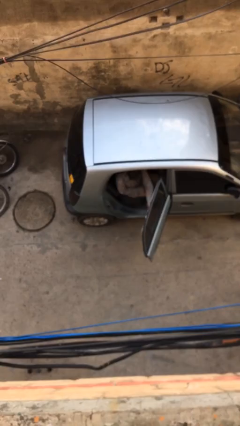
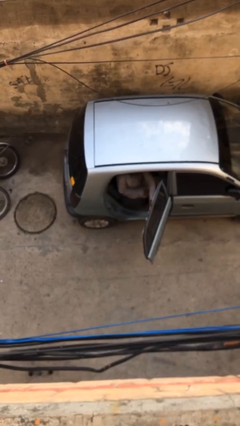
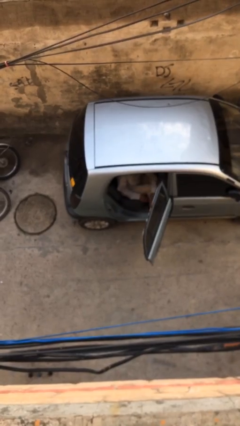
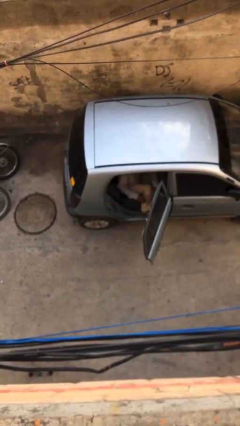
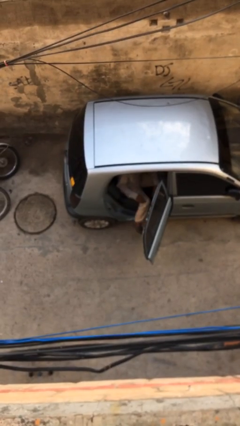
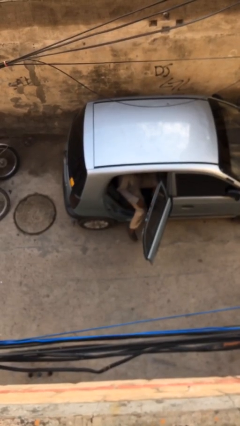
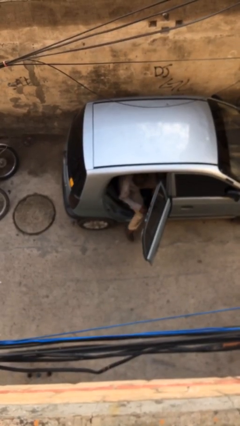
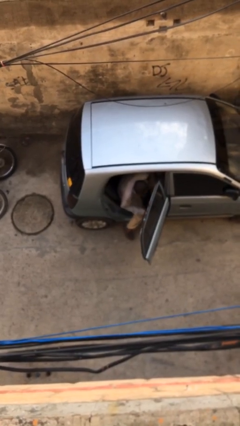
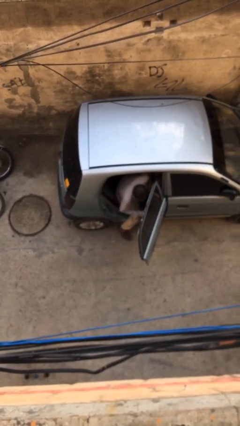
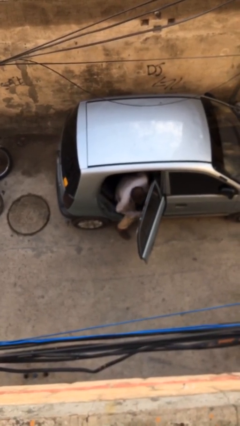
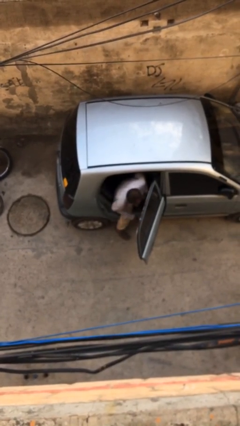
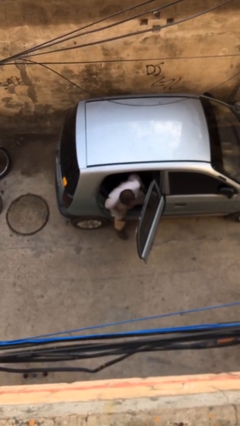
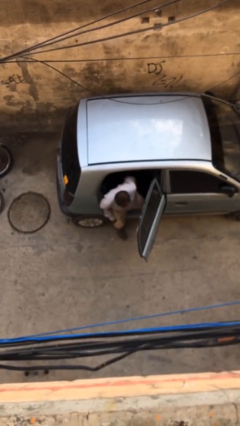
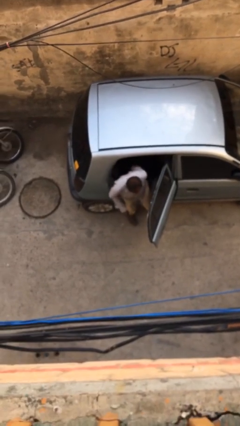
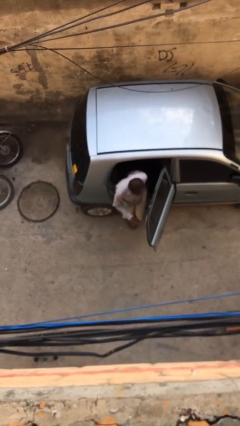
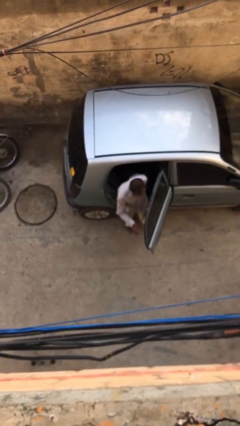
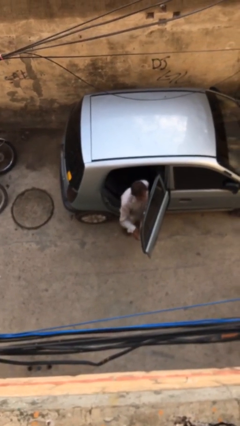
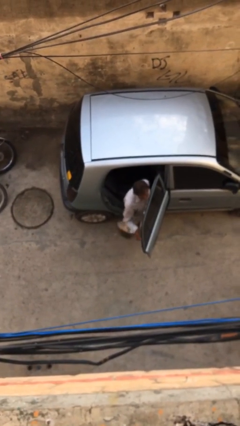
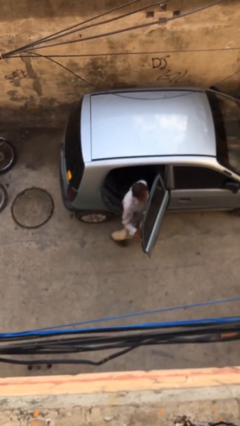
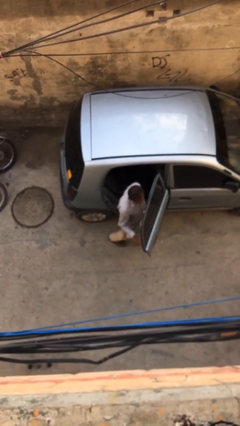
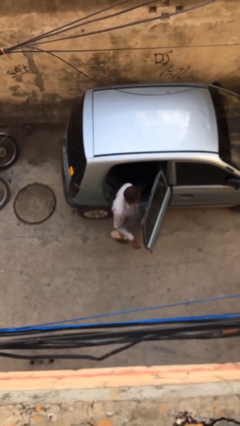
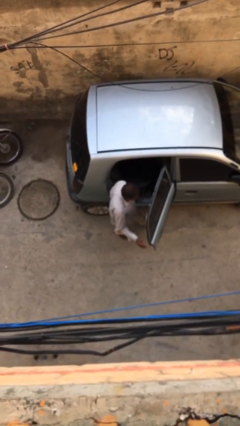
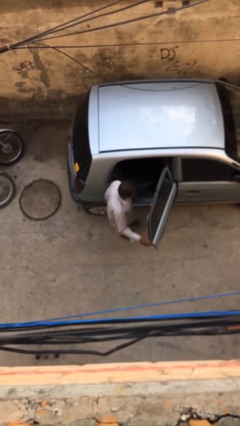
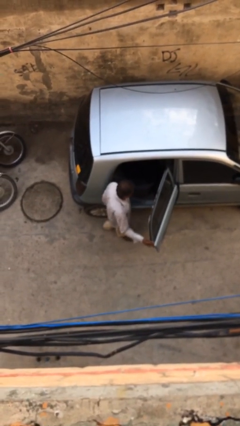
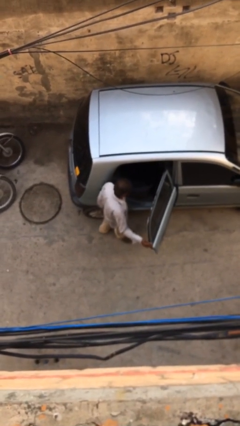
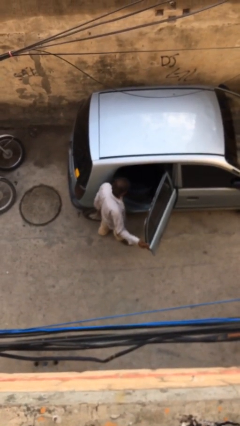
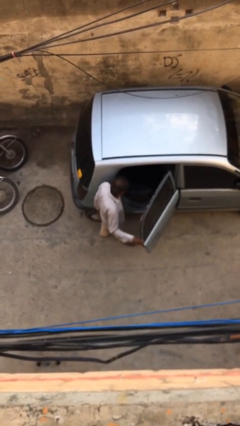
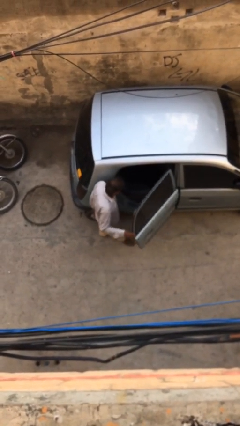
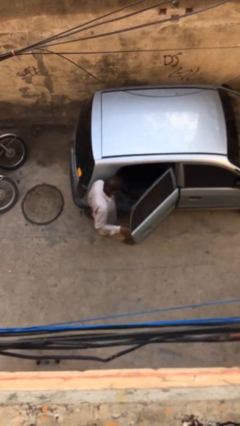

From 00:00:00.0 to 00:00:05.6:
person exits car

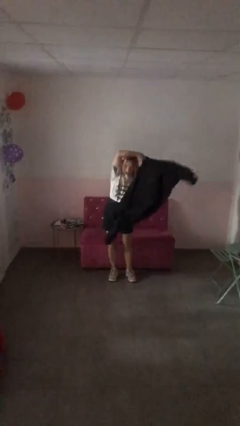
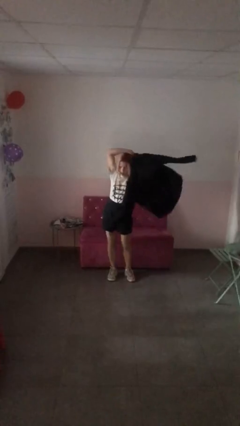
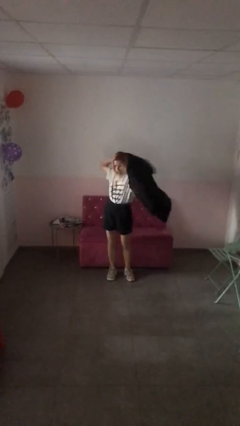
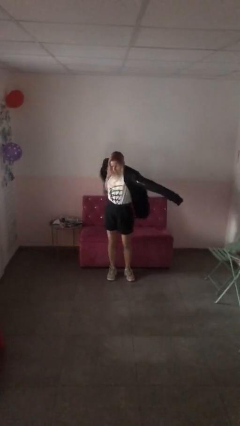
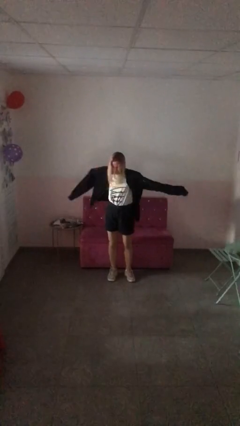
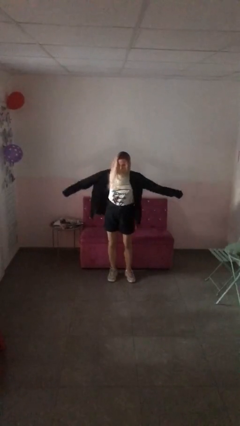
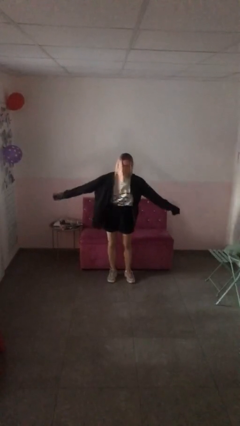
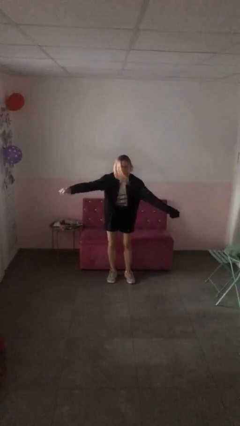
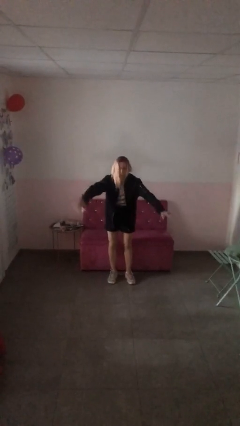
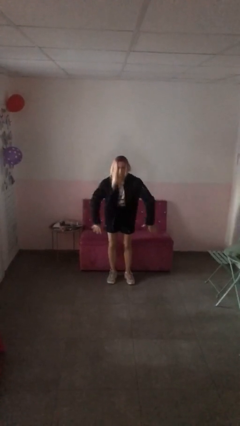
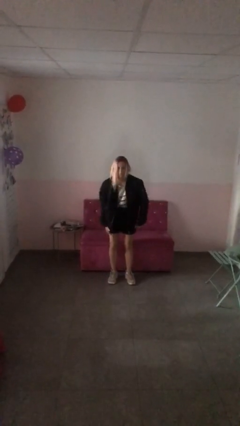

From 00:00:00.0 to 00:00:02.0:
person puts on jacket

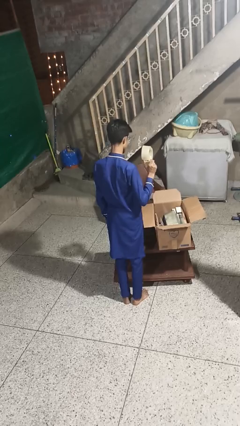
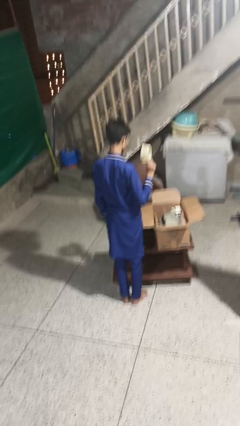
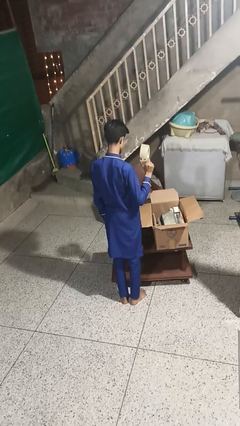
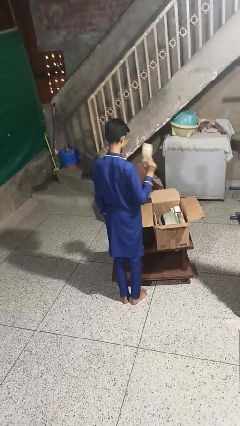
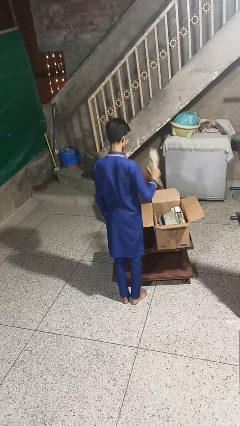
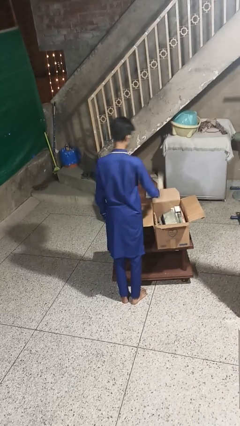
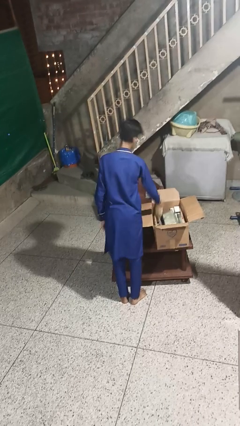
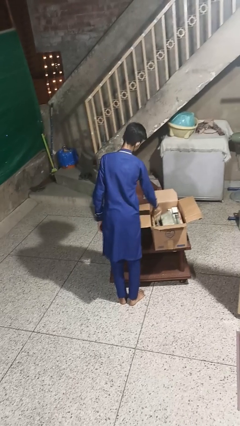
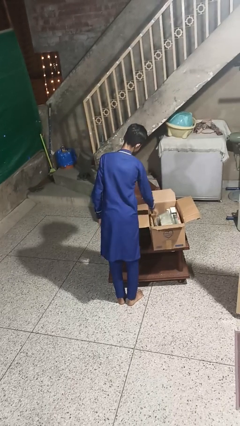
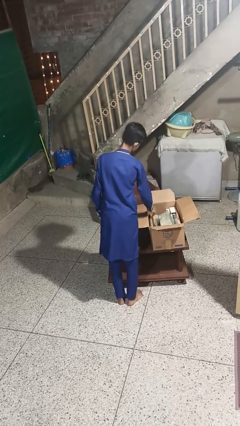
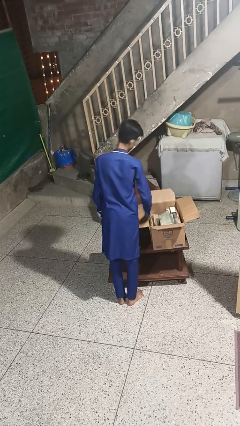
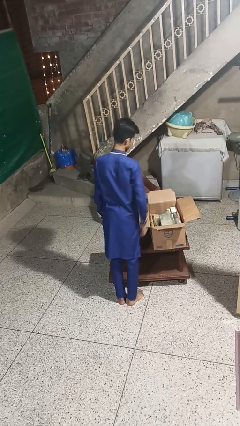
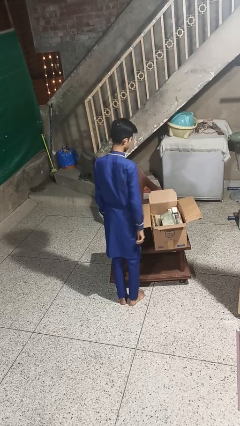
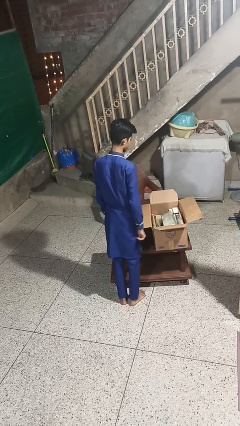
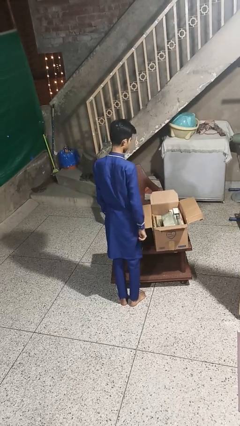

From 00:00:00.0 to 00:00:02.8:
person puts object into box

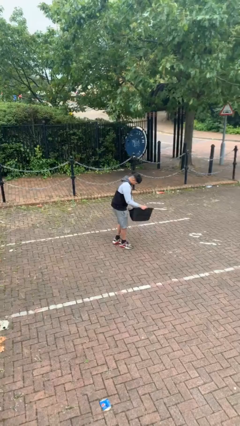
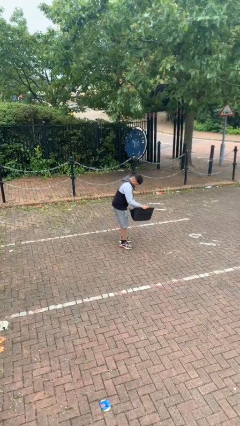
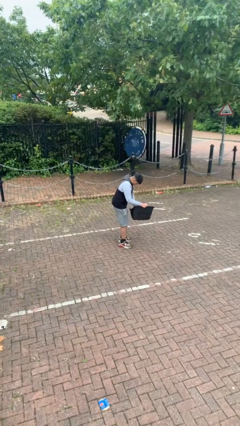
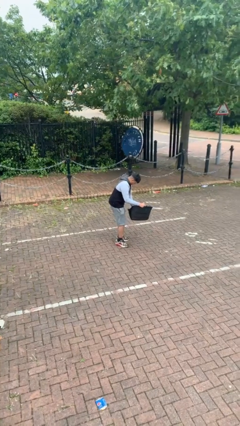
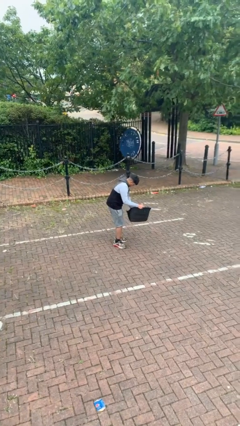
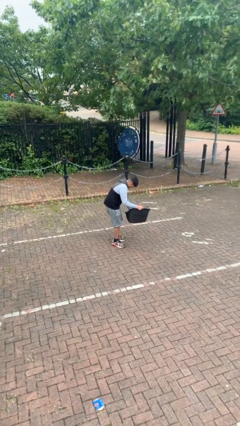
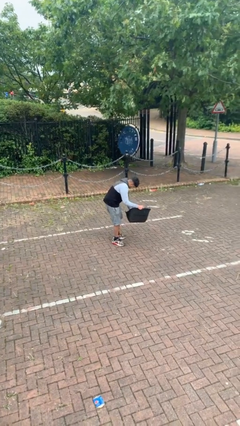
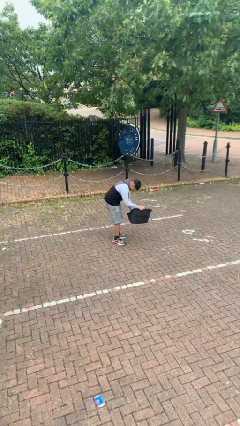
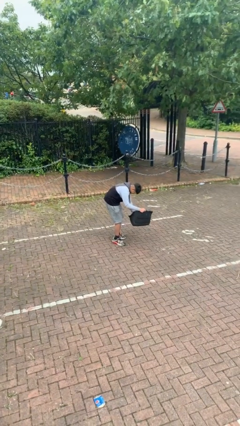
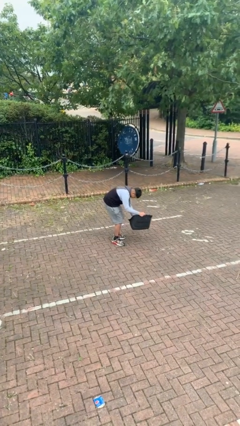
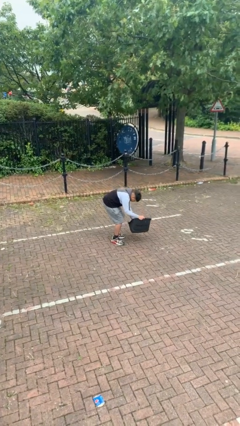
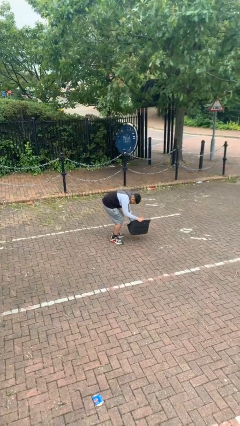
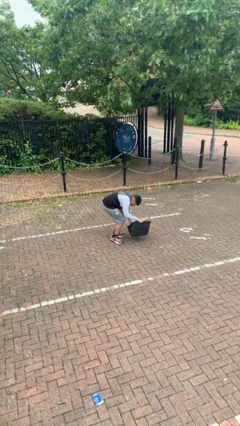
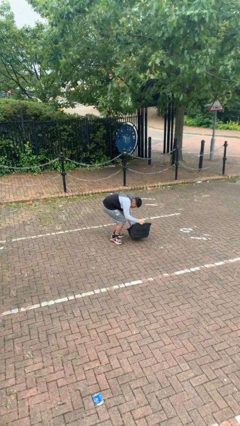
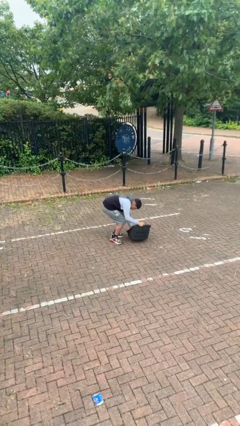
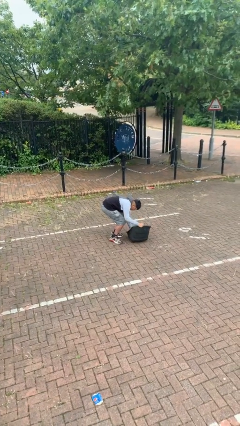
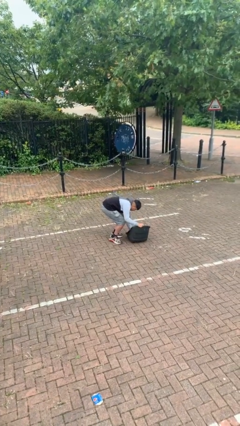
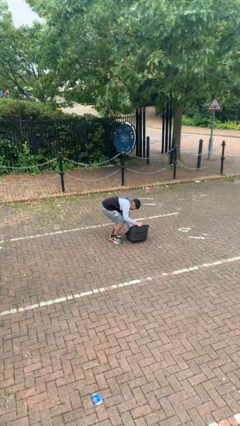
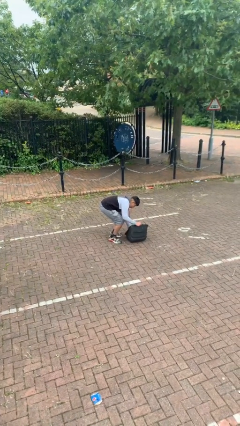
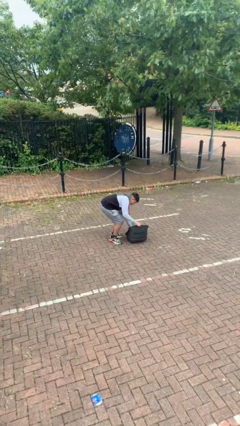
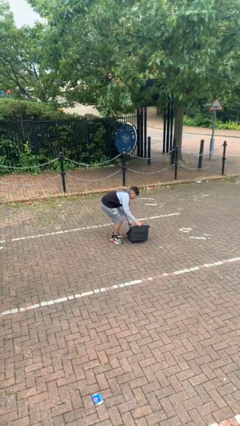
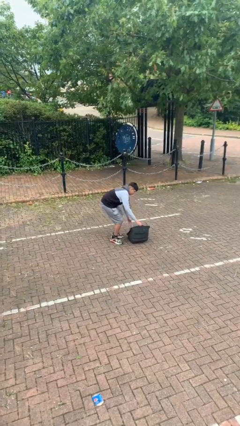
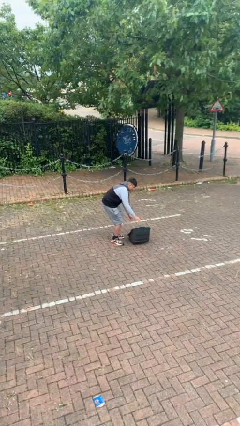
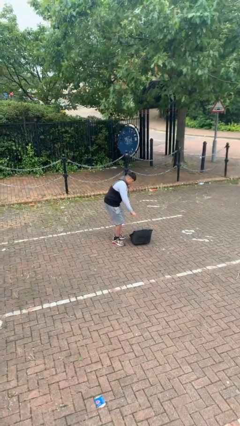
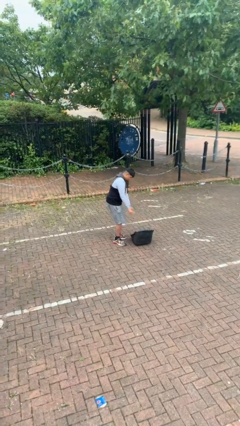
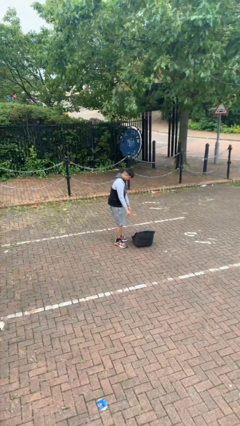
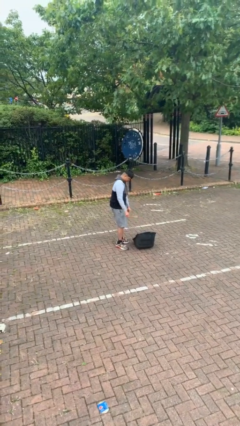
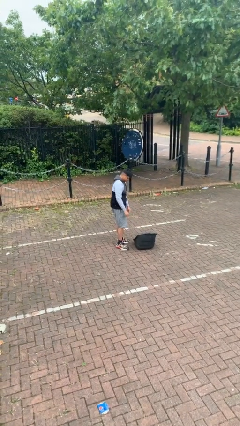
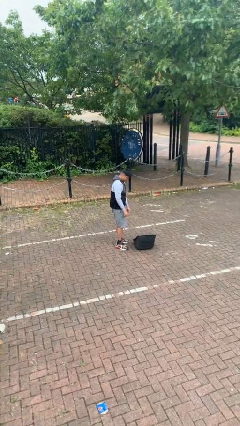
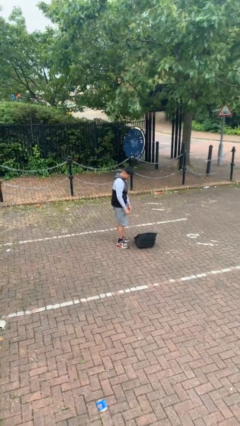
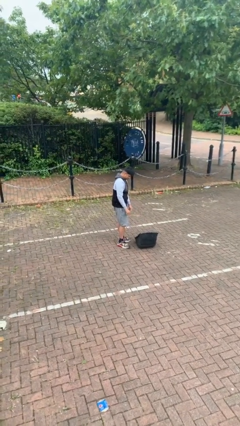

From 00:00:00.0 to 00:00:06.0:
person puts down object on floor

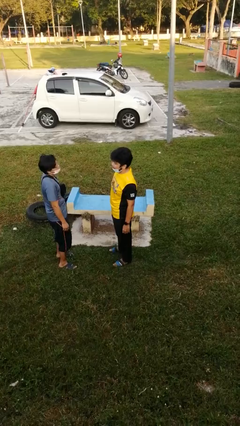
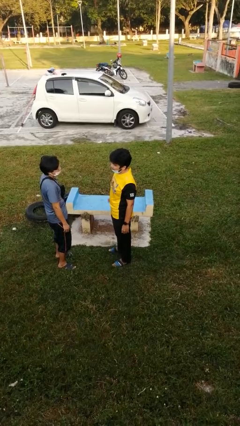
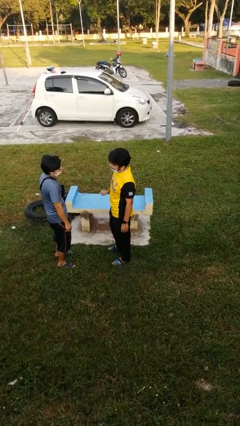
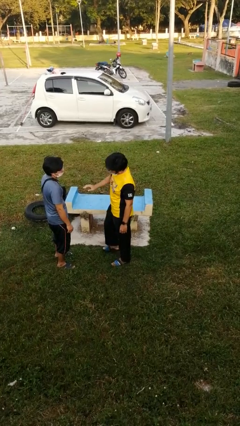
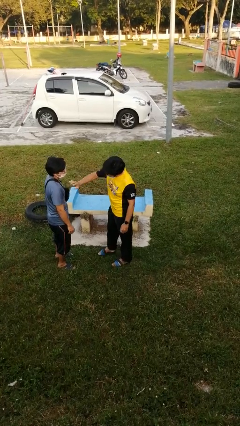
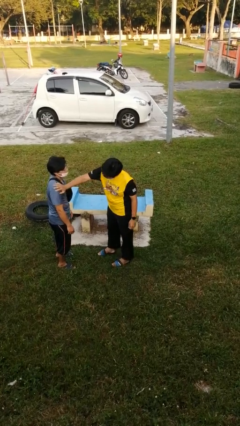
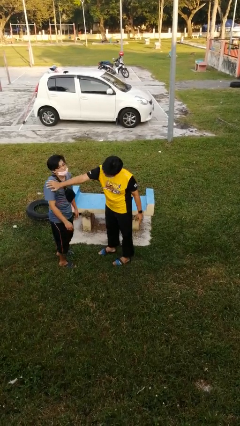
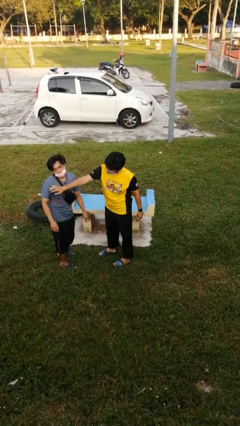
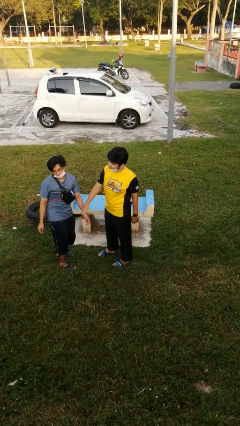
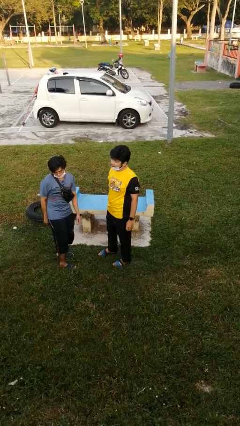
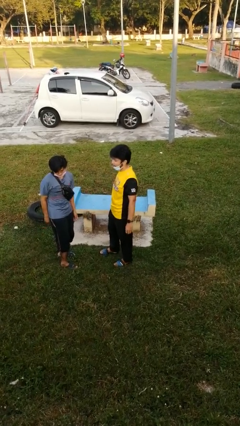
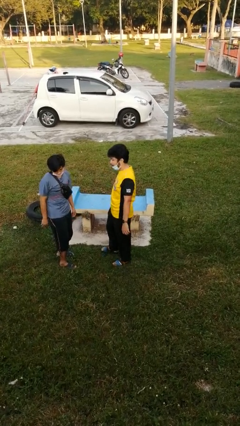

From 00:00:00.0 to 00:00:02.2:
person shoves person
